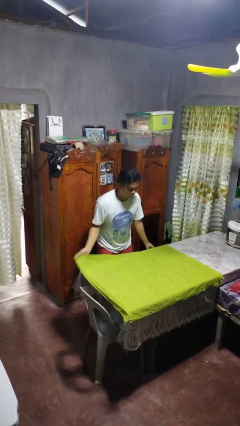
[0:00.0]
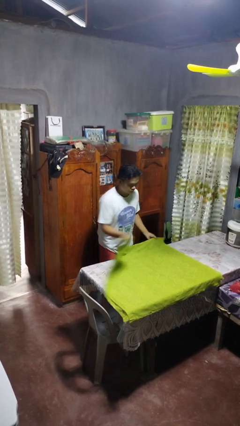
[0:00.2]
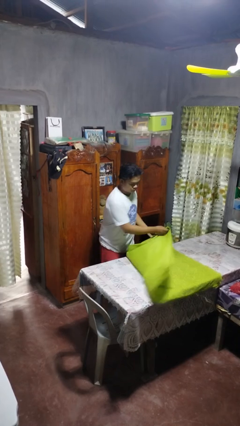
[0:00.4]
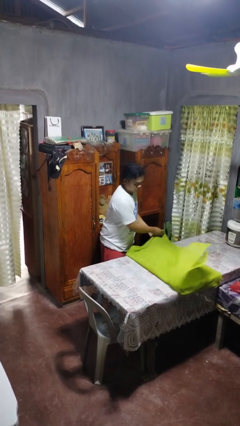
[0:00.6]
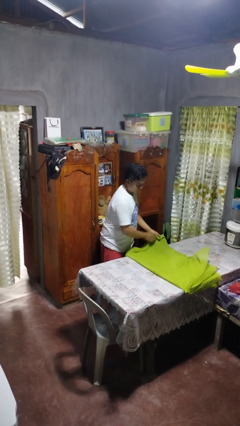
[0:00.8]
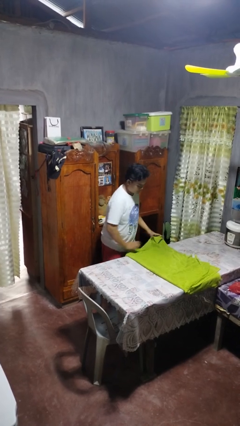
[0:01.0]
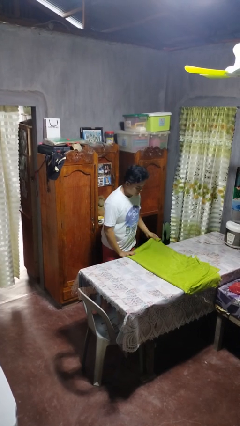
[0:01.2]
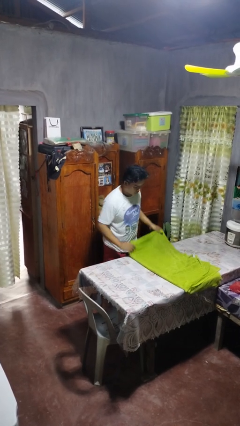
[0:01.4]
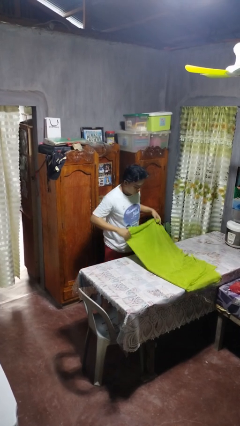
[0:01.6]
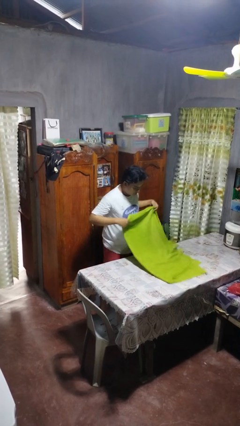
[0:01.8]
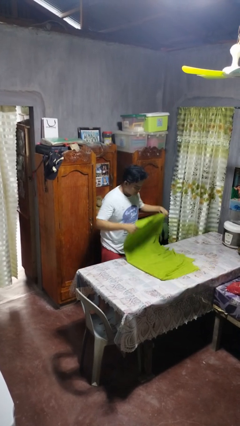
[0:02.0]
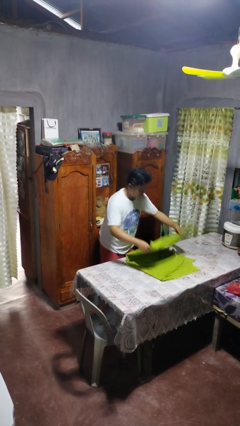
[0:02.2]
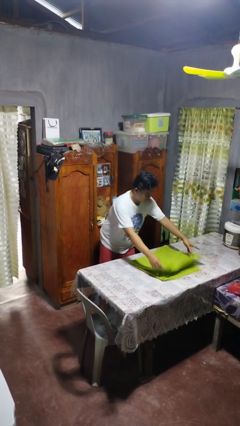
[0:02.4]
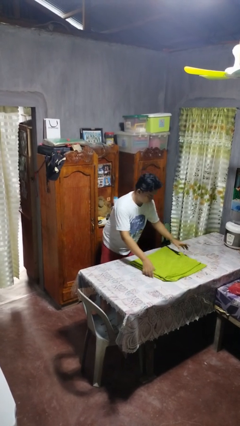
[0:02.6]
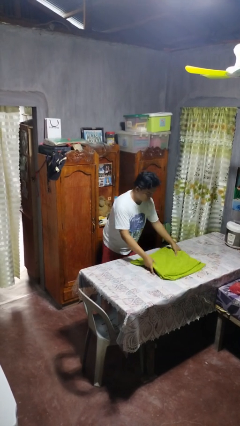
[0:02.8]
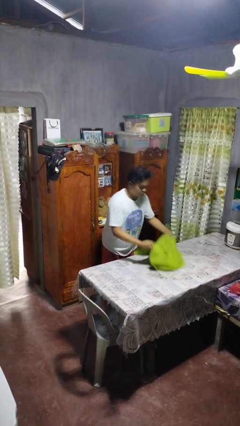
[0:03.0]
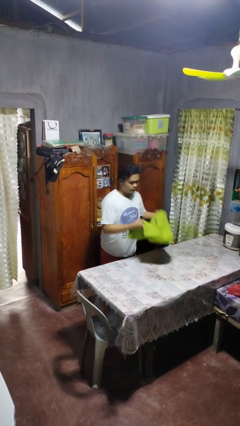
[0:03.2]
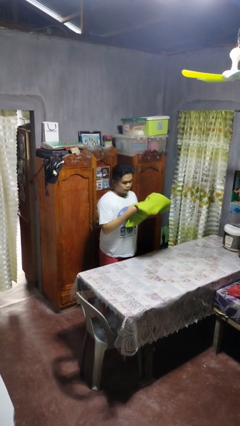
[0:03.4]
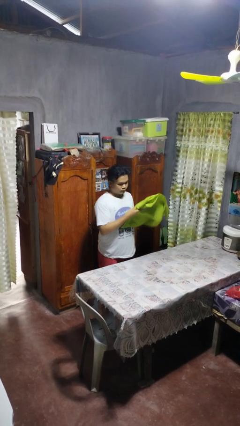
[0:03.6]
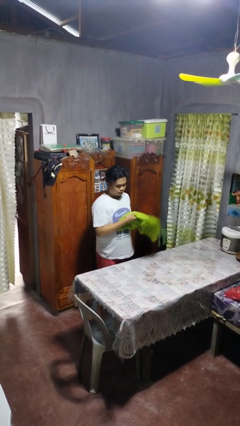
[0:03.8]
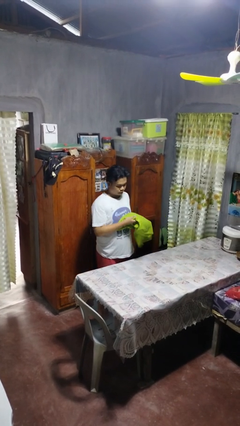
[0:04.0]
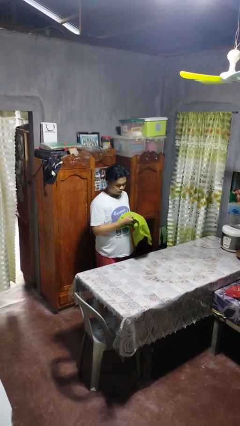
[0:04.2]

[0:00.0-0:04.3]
person folds tablecloth

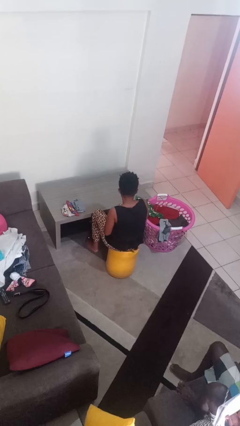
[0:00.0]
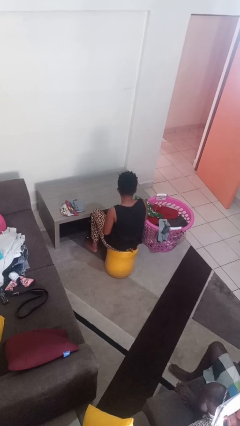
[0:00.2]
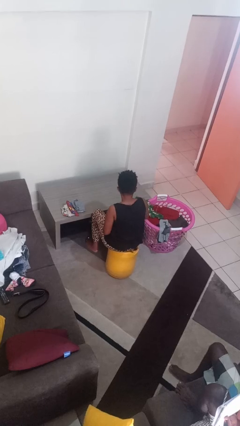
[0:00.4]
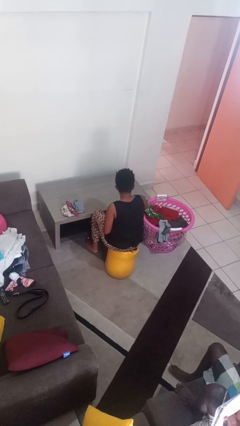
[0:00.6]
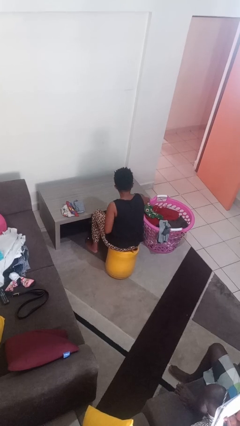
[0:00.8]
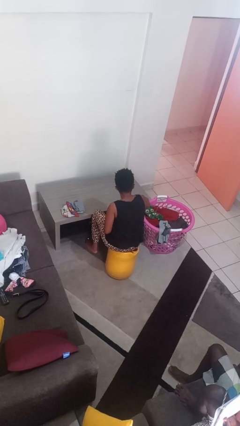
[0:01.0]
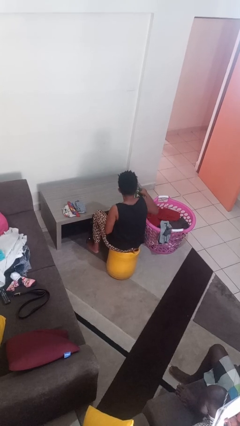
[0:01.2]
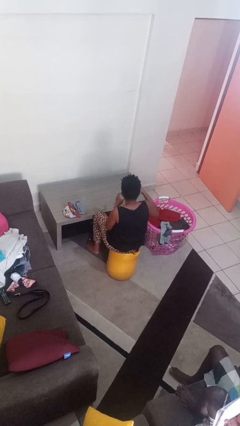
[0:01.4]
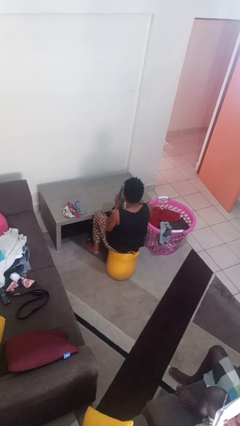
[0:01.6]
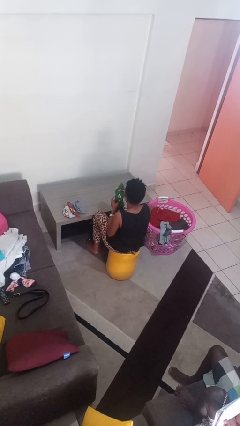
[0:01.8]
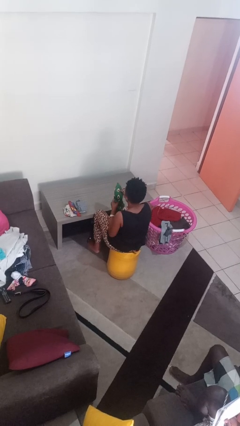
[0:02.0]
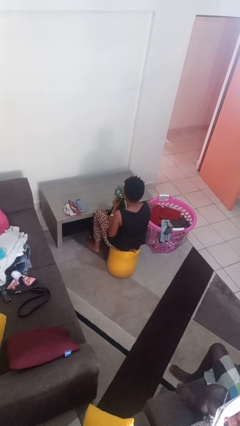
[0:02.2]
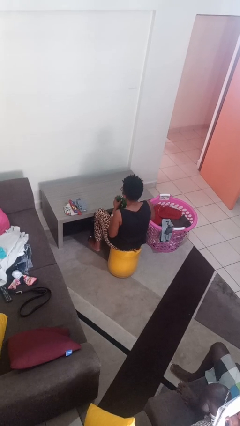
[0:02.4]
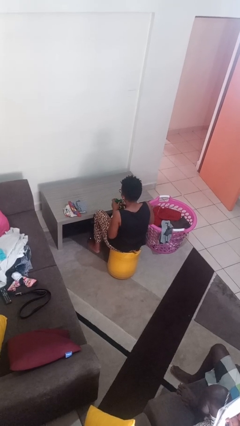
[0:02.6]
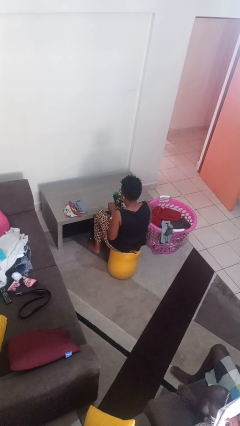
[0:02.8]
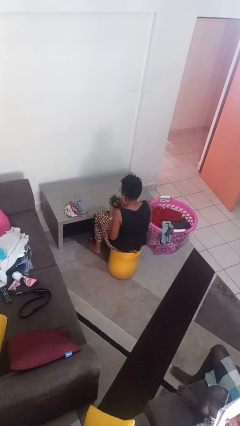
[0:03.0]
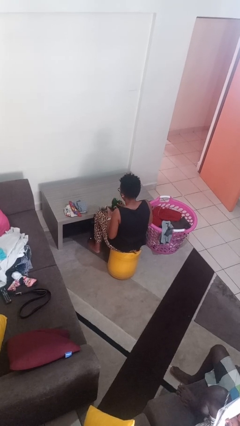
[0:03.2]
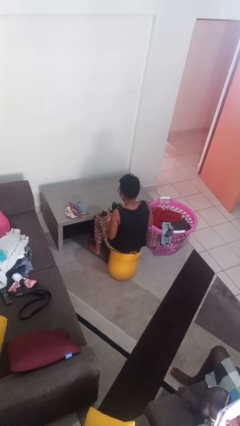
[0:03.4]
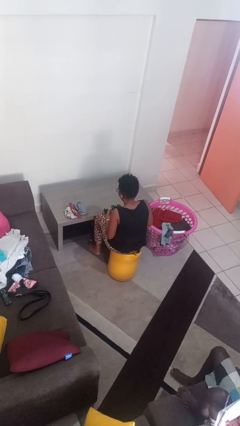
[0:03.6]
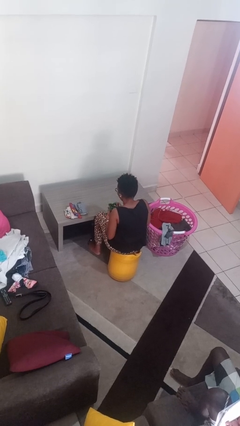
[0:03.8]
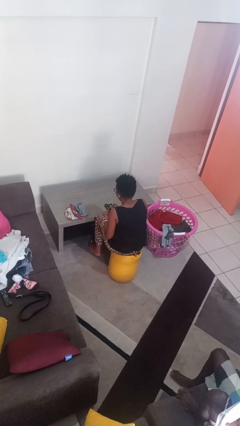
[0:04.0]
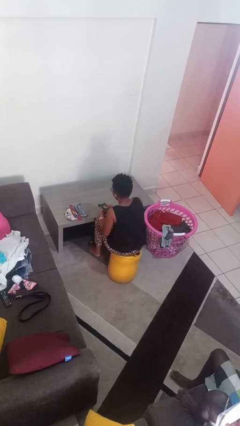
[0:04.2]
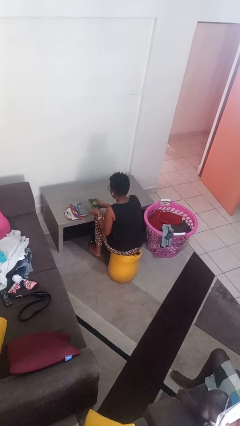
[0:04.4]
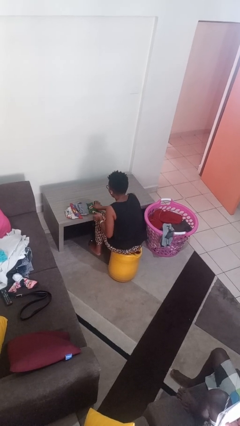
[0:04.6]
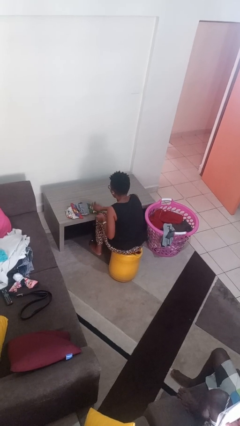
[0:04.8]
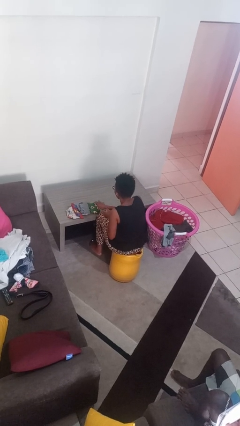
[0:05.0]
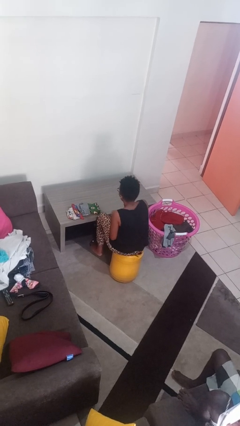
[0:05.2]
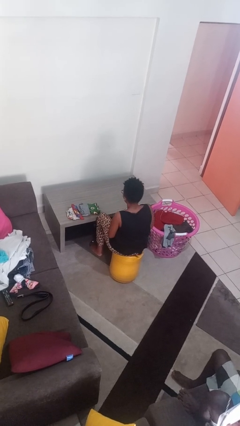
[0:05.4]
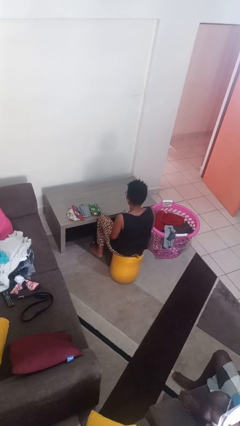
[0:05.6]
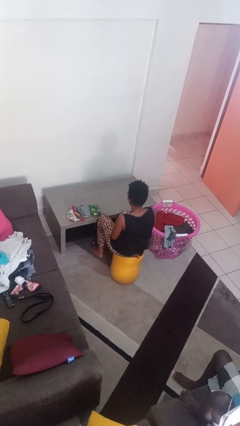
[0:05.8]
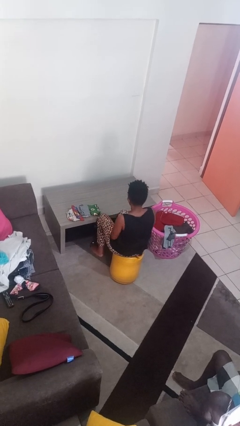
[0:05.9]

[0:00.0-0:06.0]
person folds socks

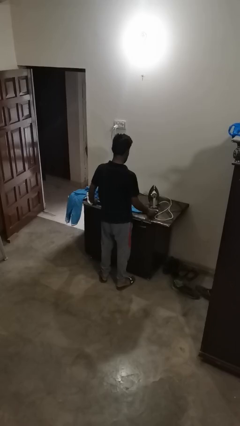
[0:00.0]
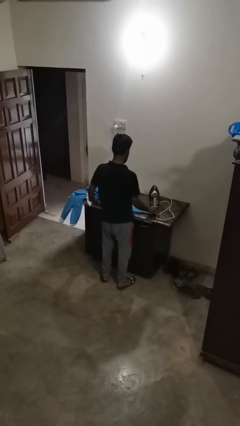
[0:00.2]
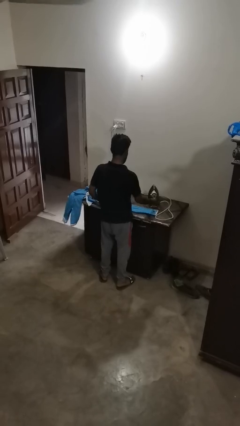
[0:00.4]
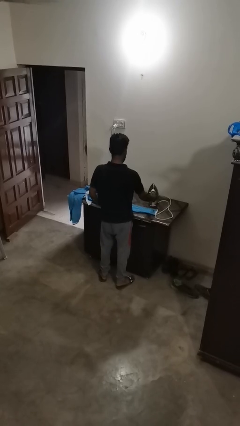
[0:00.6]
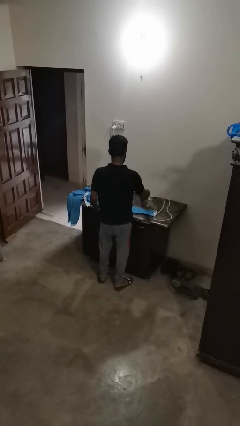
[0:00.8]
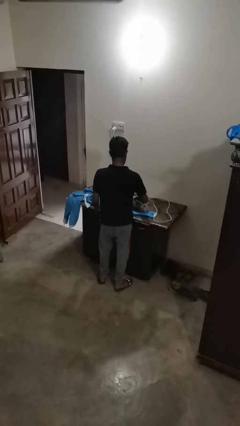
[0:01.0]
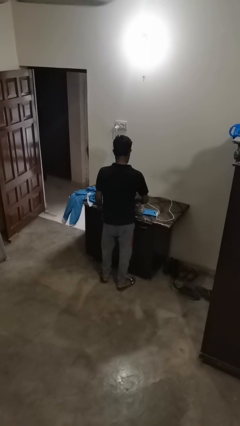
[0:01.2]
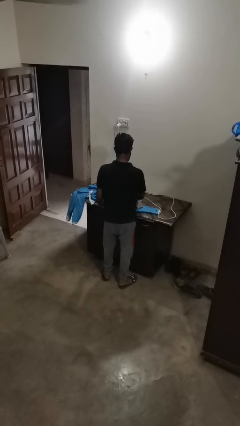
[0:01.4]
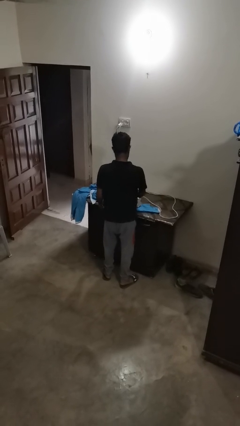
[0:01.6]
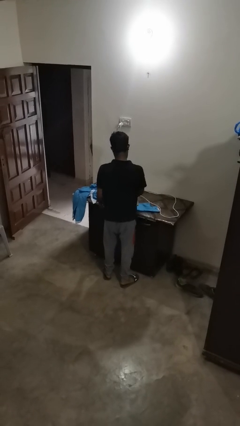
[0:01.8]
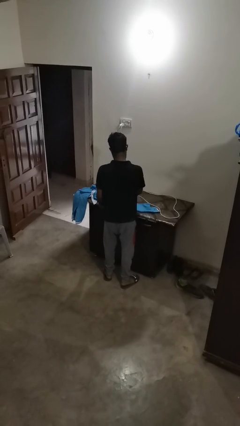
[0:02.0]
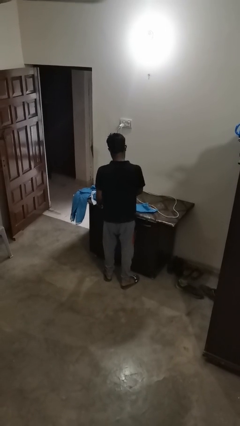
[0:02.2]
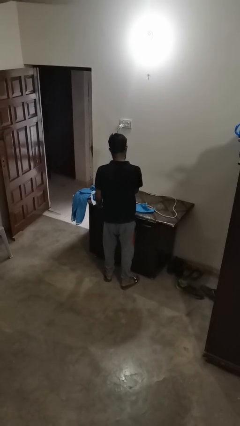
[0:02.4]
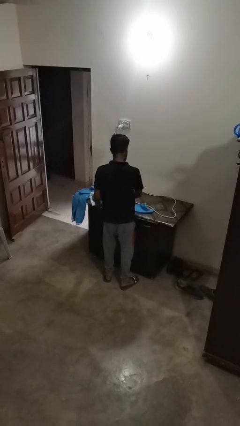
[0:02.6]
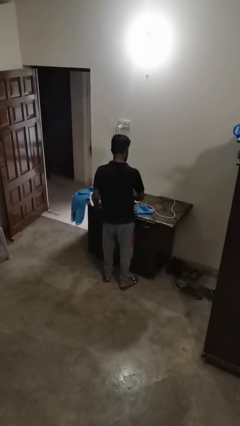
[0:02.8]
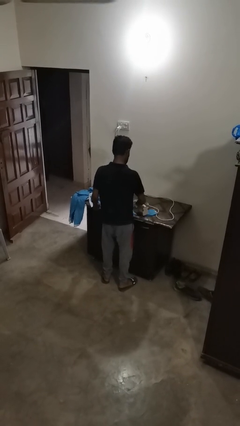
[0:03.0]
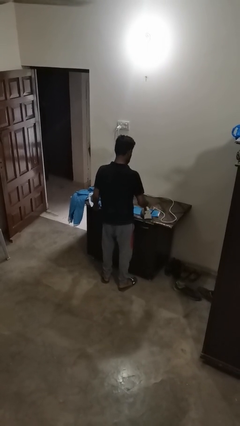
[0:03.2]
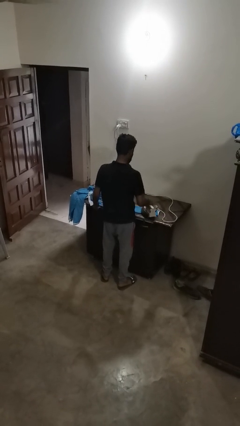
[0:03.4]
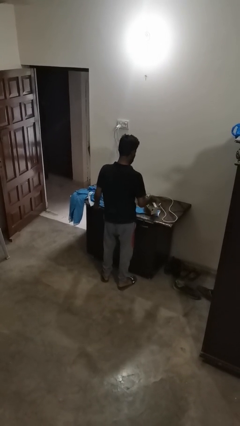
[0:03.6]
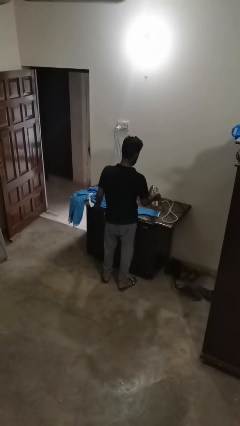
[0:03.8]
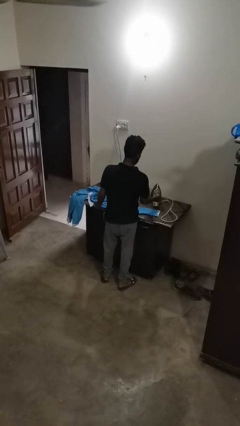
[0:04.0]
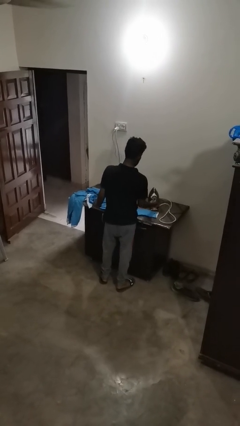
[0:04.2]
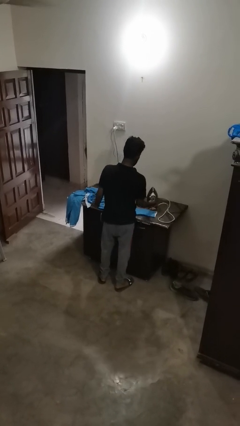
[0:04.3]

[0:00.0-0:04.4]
person irons clothes

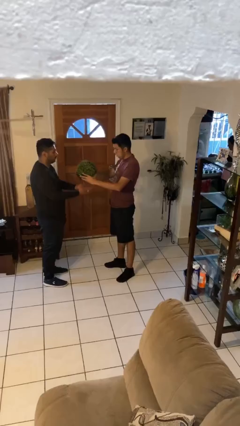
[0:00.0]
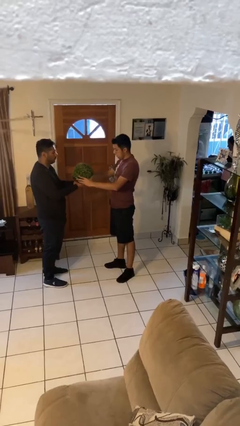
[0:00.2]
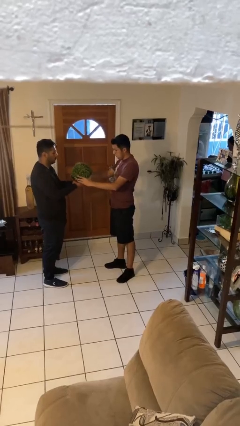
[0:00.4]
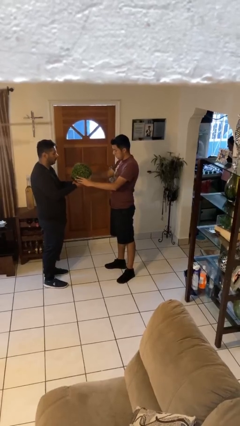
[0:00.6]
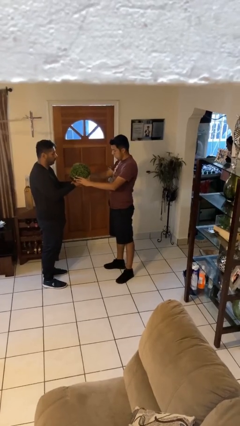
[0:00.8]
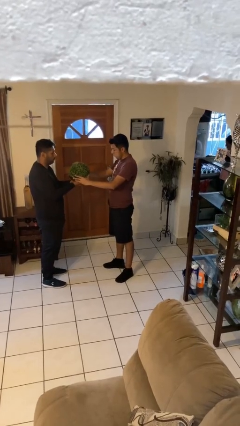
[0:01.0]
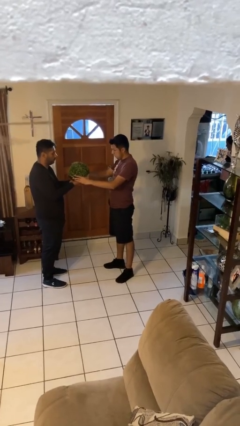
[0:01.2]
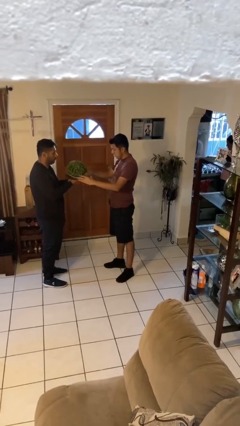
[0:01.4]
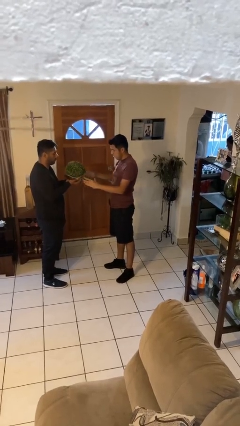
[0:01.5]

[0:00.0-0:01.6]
person transfers object to person

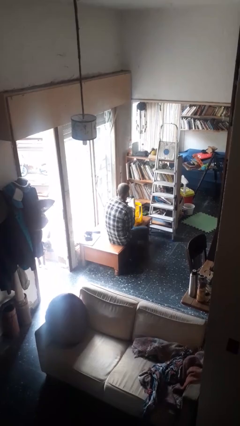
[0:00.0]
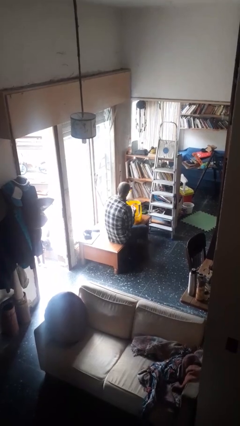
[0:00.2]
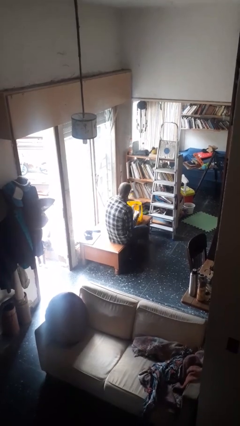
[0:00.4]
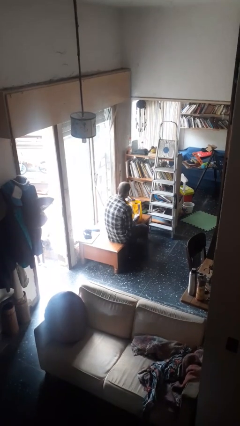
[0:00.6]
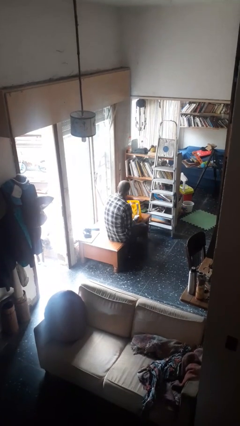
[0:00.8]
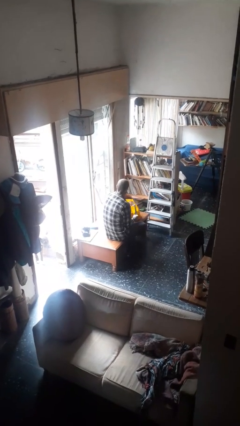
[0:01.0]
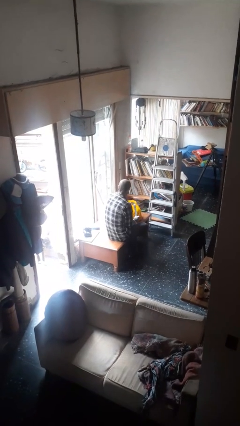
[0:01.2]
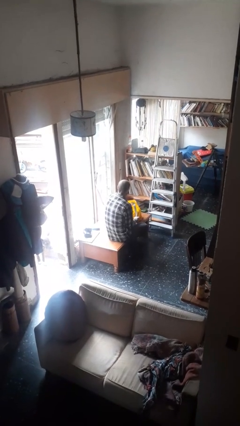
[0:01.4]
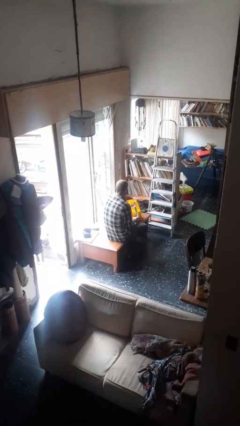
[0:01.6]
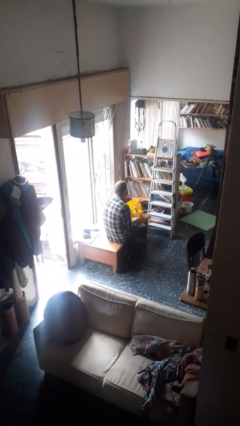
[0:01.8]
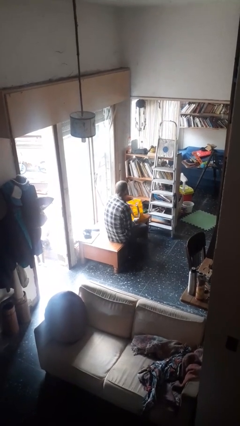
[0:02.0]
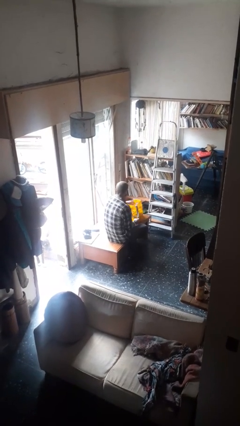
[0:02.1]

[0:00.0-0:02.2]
person puts object into bag
